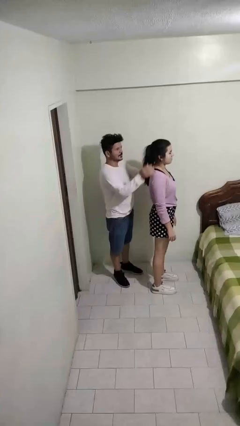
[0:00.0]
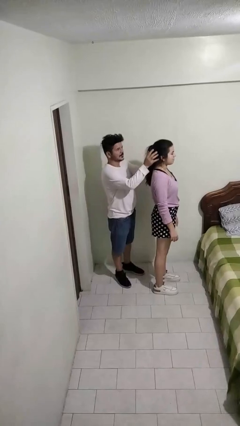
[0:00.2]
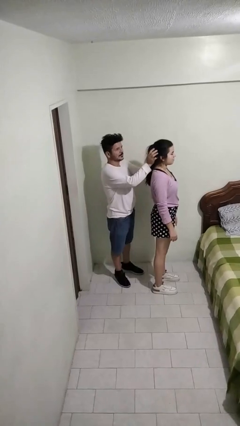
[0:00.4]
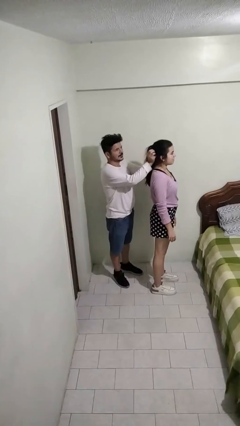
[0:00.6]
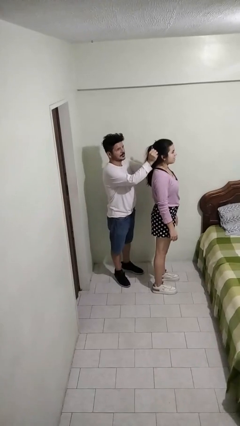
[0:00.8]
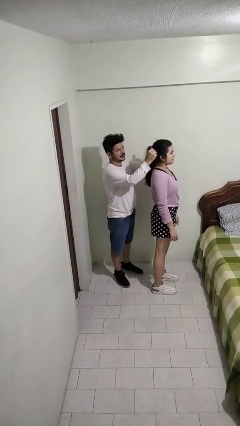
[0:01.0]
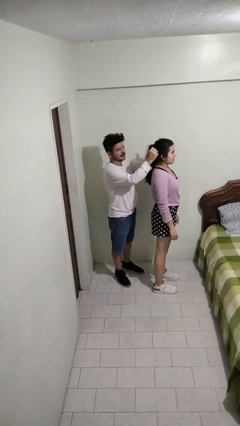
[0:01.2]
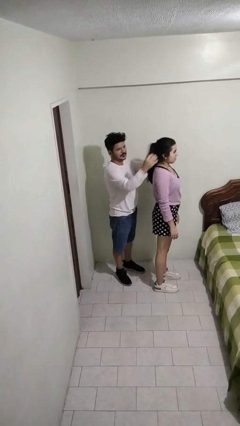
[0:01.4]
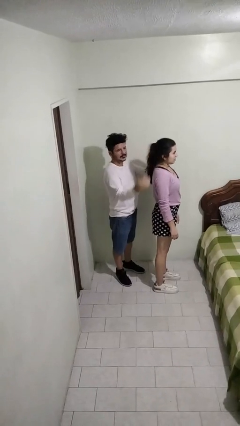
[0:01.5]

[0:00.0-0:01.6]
person grabs person by hair

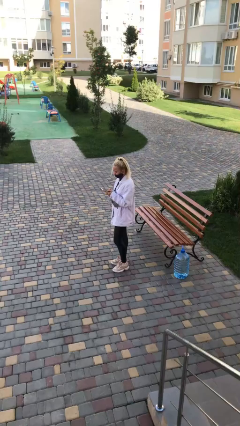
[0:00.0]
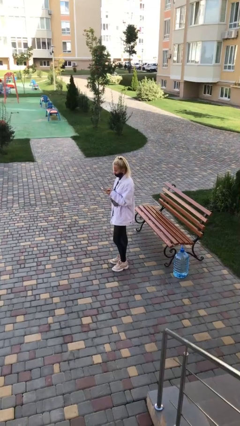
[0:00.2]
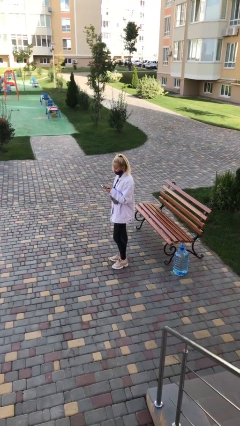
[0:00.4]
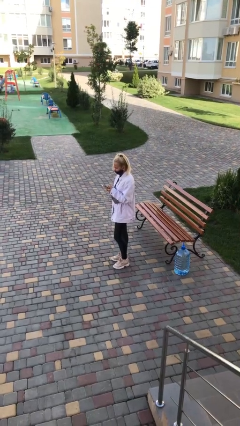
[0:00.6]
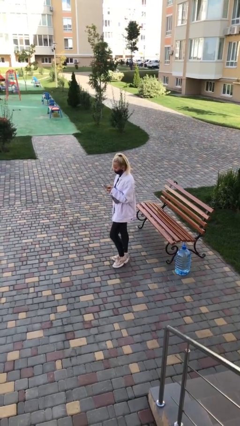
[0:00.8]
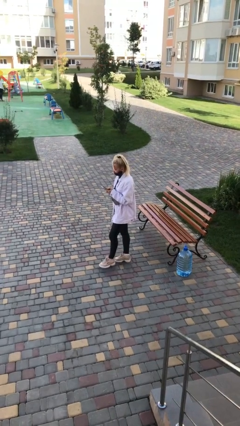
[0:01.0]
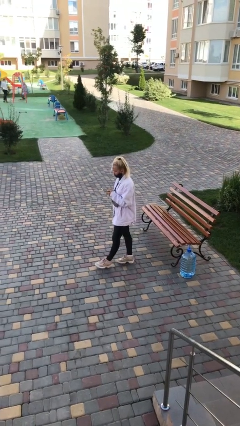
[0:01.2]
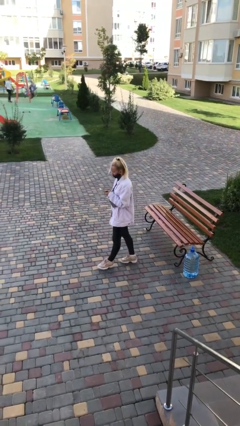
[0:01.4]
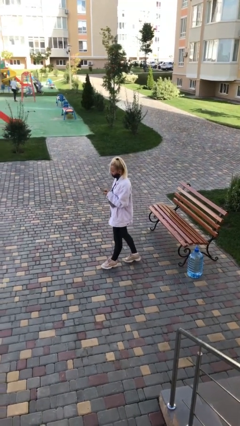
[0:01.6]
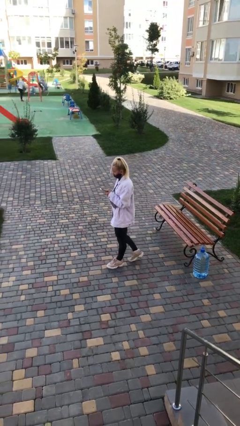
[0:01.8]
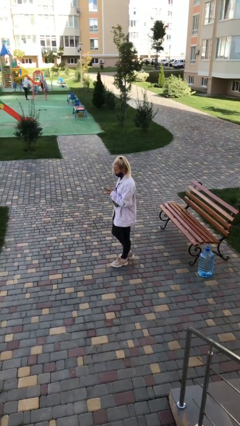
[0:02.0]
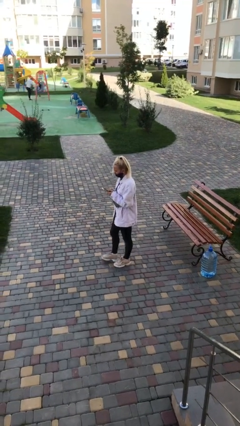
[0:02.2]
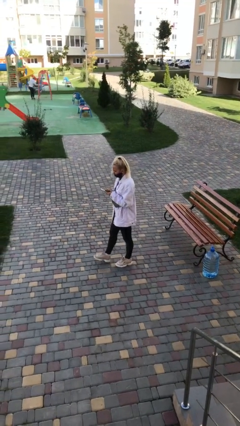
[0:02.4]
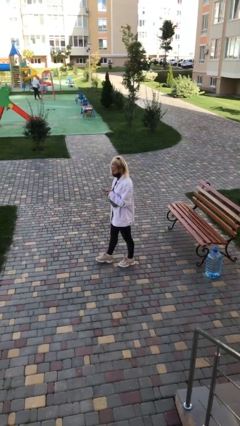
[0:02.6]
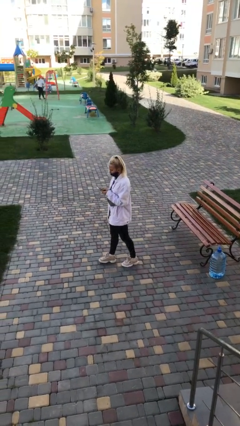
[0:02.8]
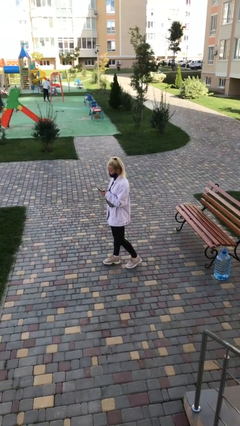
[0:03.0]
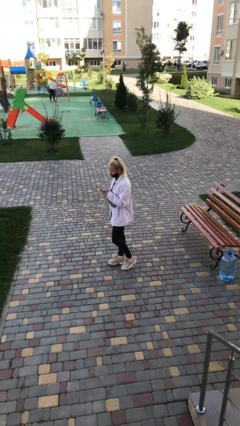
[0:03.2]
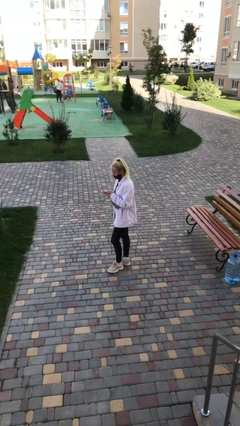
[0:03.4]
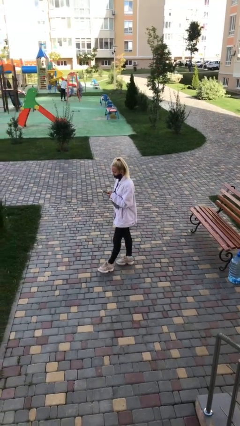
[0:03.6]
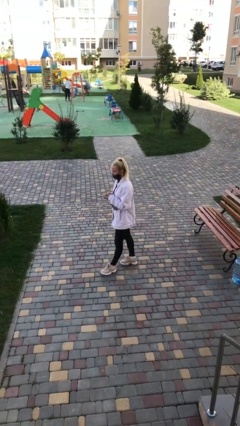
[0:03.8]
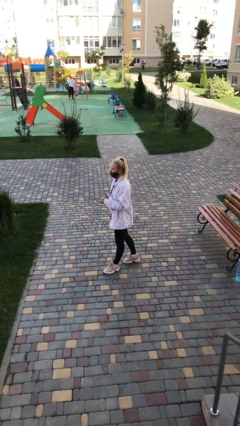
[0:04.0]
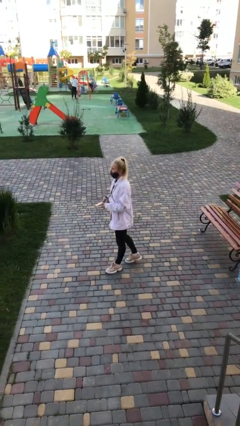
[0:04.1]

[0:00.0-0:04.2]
person texts on phone

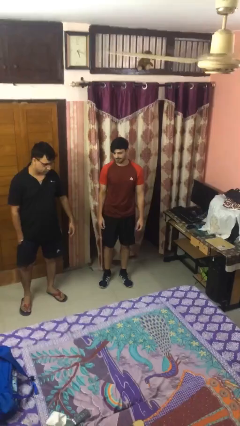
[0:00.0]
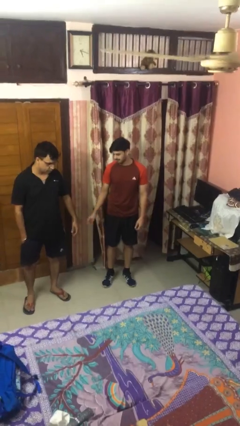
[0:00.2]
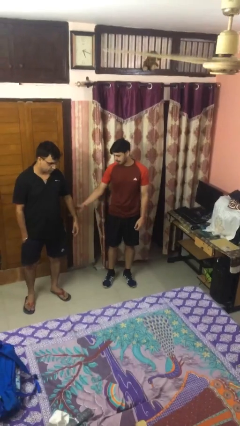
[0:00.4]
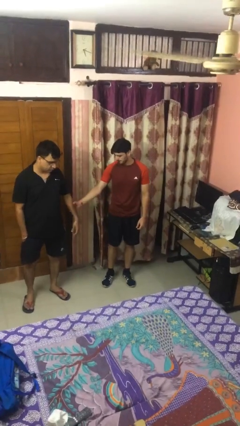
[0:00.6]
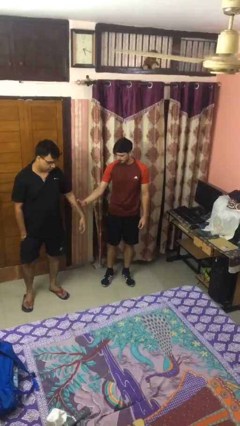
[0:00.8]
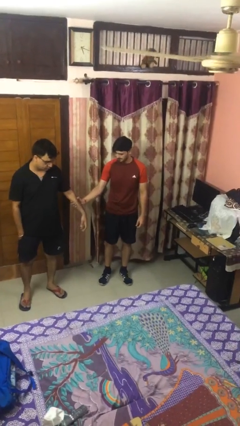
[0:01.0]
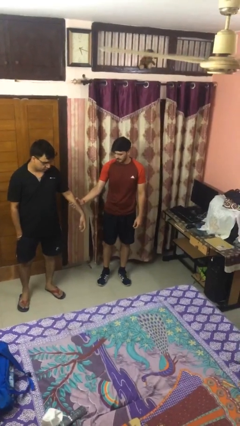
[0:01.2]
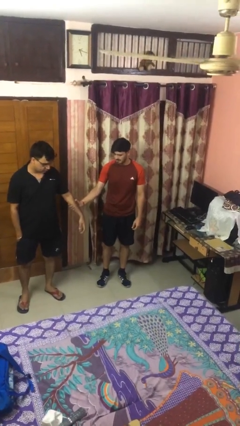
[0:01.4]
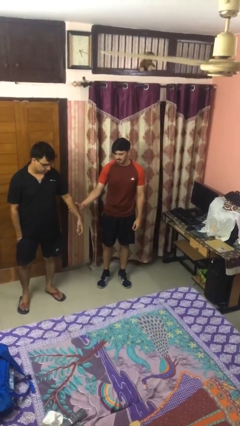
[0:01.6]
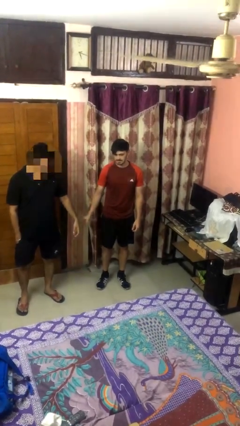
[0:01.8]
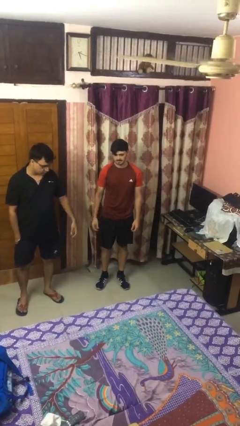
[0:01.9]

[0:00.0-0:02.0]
person grabs person by forearm

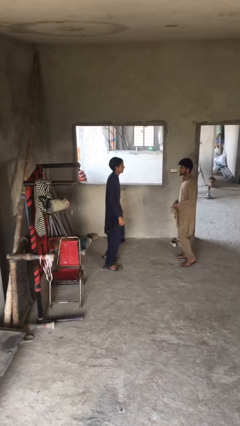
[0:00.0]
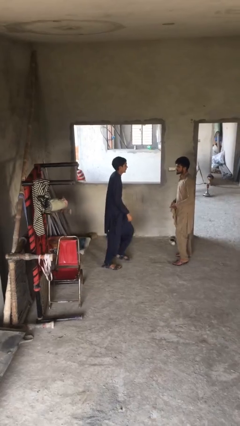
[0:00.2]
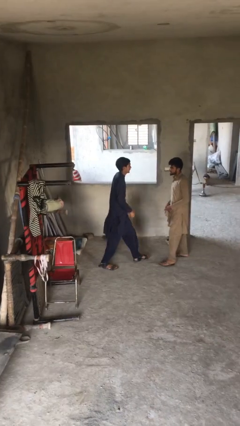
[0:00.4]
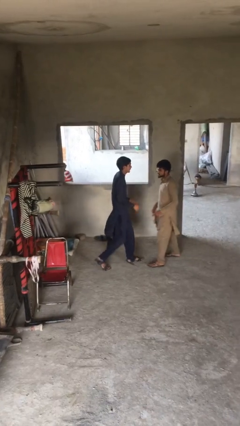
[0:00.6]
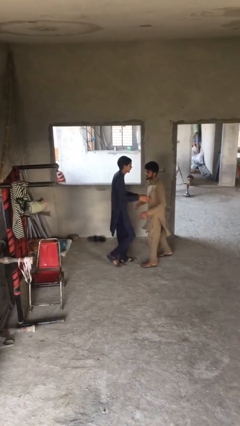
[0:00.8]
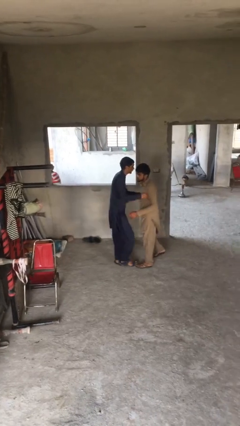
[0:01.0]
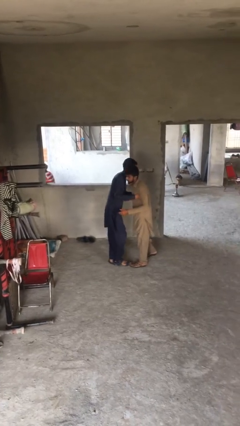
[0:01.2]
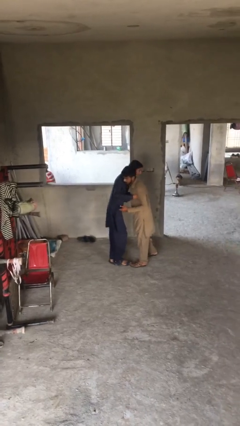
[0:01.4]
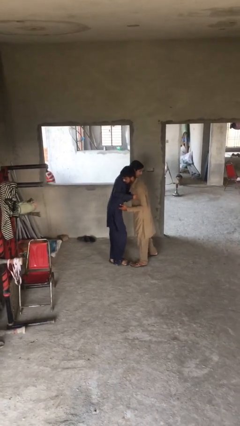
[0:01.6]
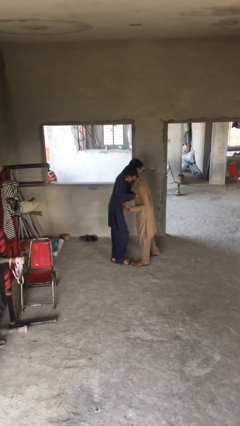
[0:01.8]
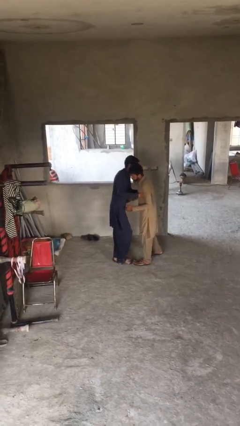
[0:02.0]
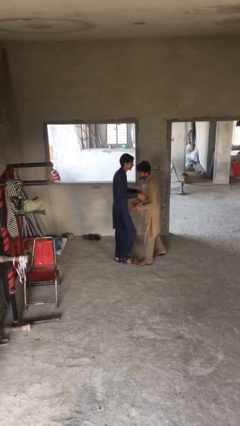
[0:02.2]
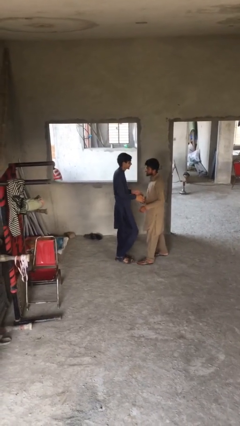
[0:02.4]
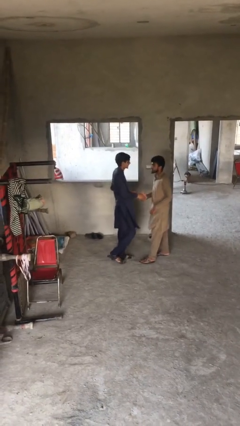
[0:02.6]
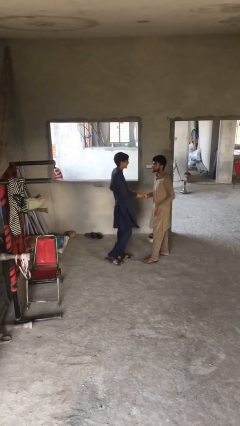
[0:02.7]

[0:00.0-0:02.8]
person embraces person

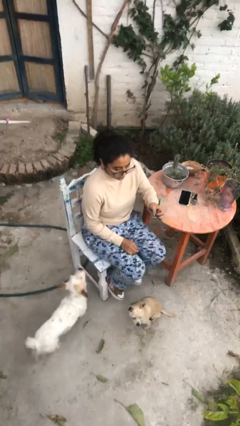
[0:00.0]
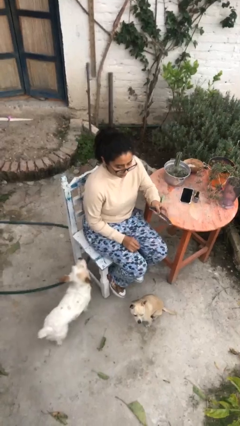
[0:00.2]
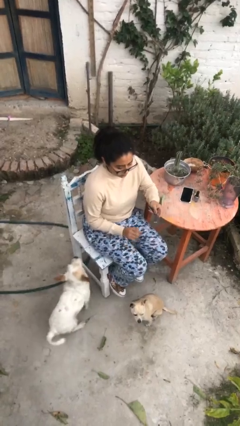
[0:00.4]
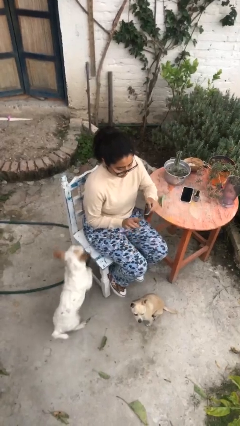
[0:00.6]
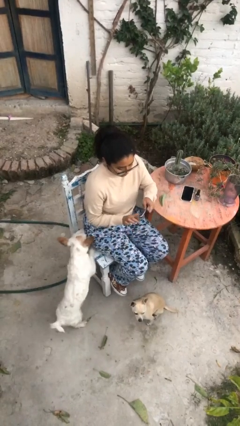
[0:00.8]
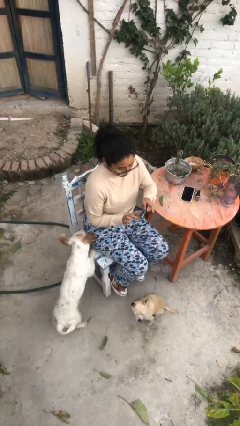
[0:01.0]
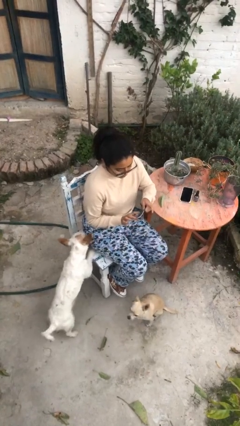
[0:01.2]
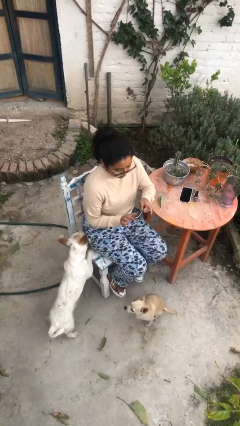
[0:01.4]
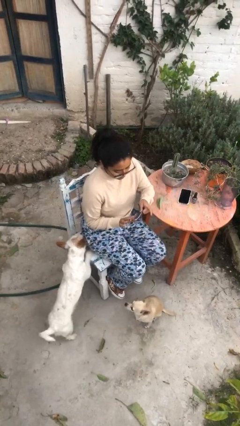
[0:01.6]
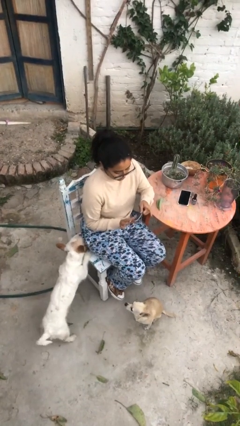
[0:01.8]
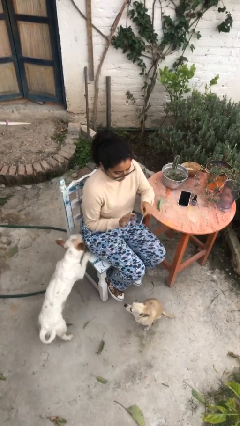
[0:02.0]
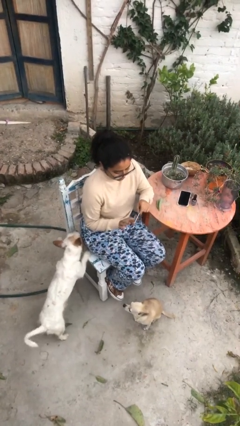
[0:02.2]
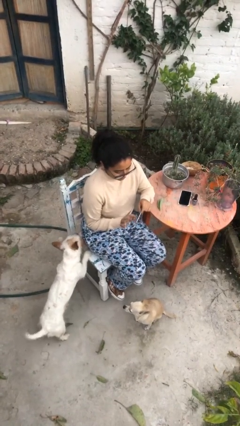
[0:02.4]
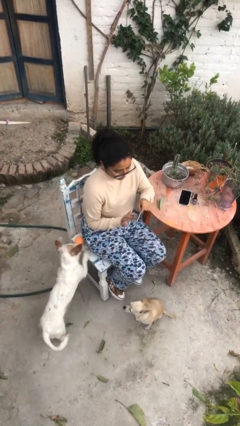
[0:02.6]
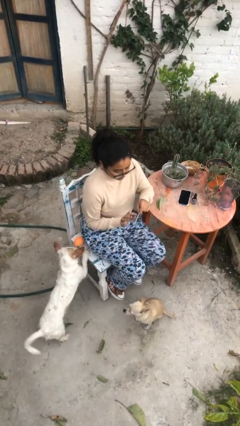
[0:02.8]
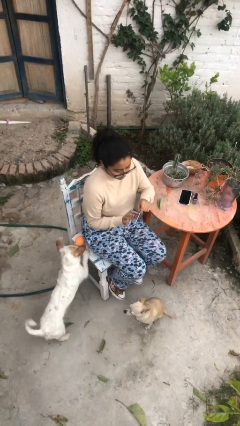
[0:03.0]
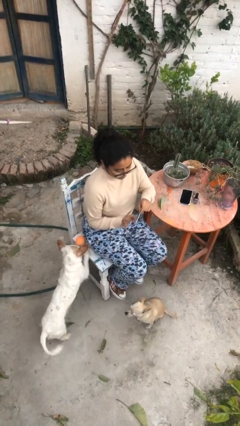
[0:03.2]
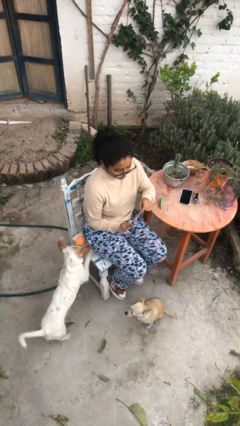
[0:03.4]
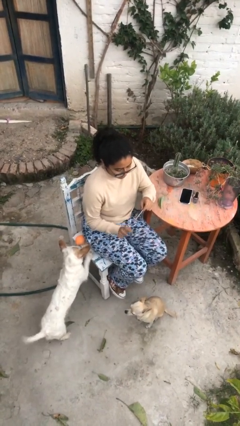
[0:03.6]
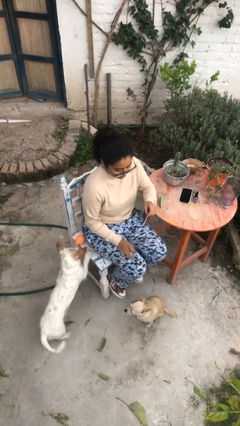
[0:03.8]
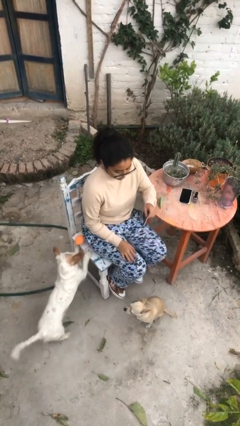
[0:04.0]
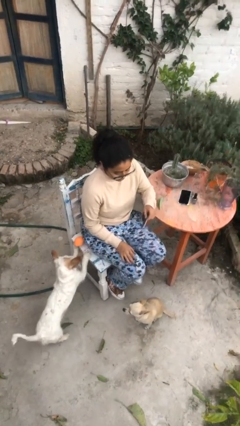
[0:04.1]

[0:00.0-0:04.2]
person files fingernails

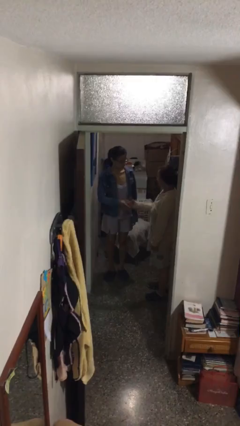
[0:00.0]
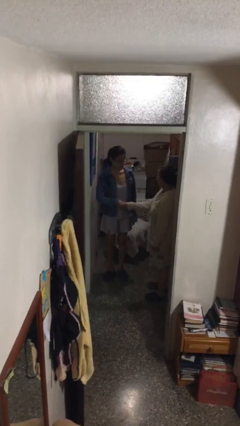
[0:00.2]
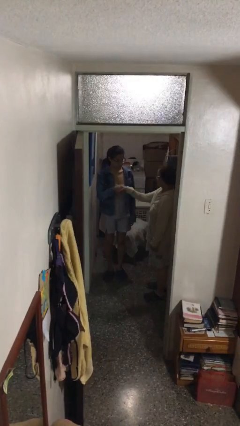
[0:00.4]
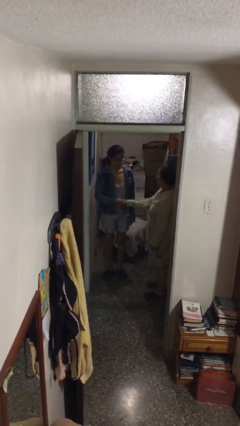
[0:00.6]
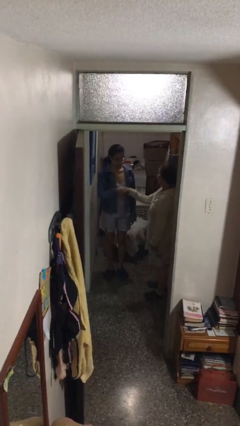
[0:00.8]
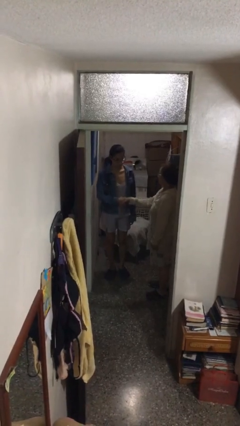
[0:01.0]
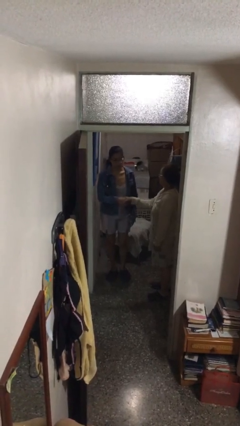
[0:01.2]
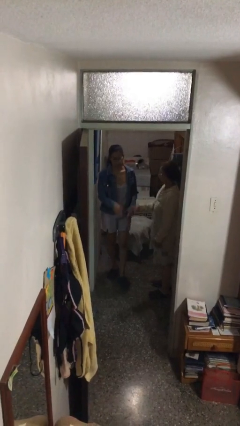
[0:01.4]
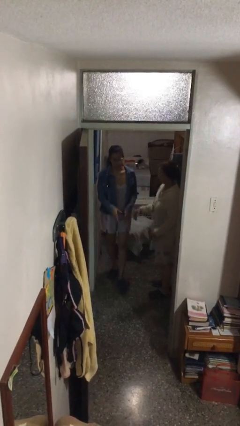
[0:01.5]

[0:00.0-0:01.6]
person shakes hand

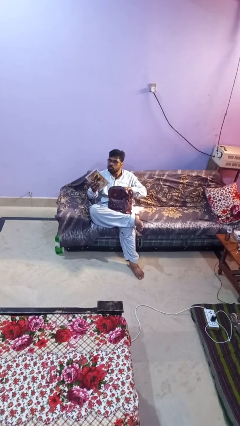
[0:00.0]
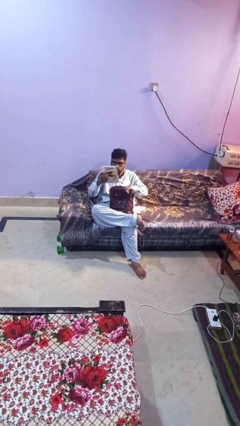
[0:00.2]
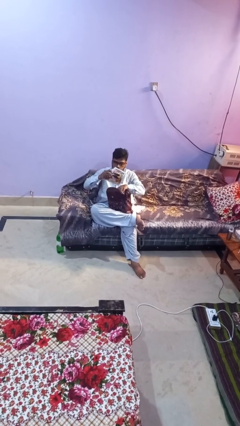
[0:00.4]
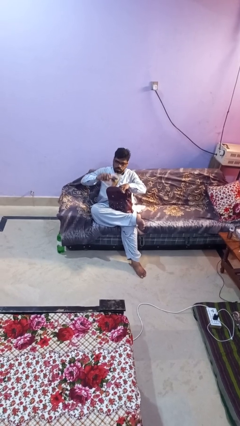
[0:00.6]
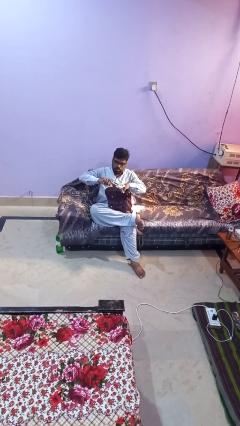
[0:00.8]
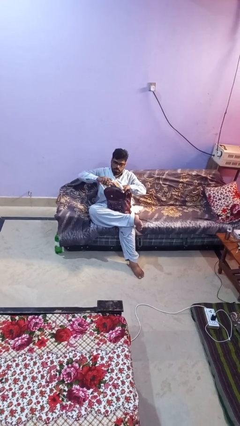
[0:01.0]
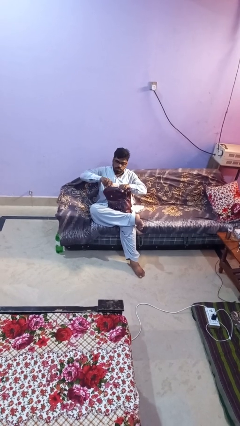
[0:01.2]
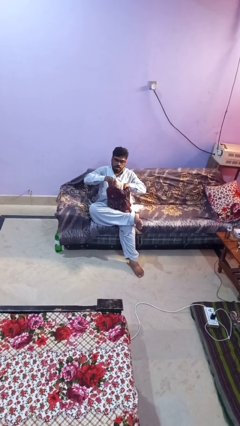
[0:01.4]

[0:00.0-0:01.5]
person puts object into backpack
